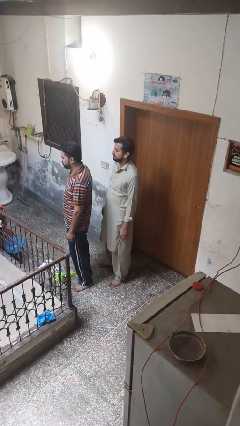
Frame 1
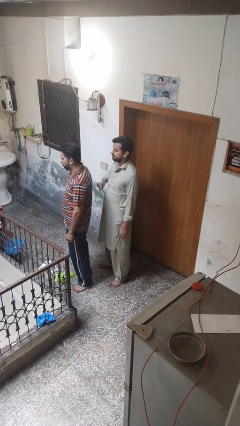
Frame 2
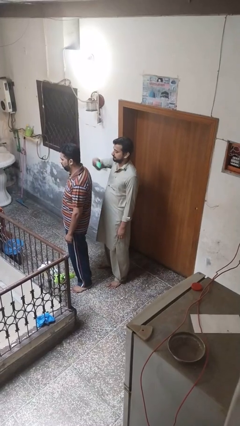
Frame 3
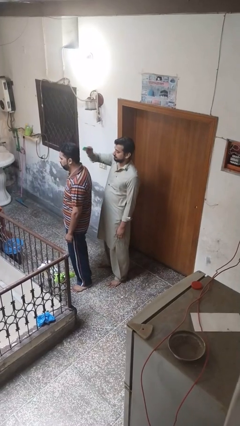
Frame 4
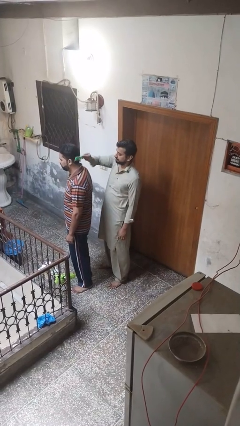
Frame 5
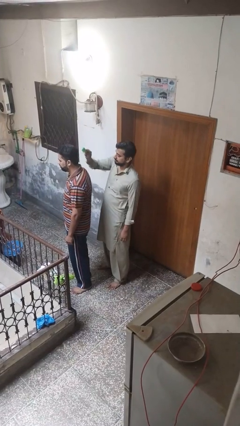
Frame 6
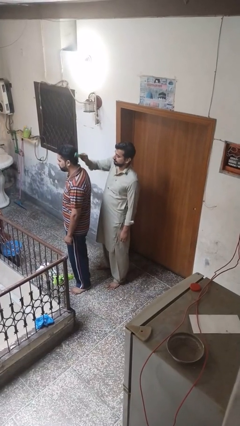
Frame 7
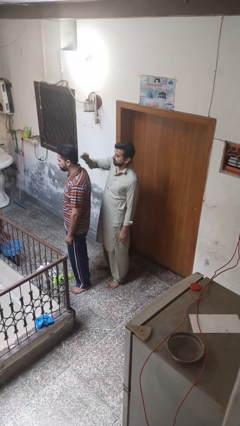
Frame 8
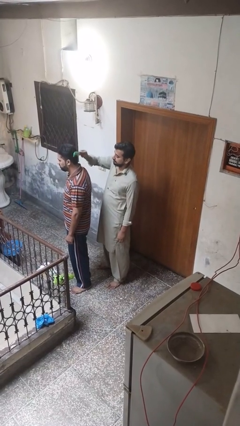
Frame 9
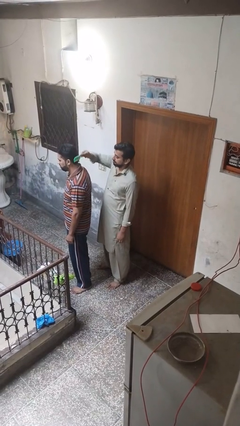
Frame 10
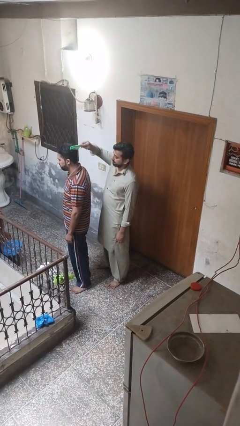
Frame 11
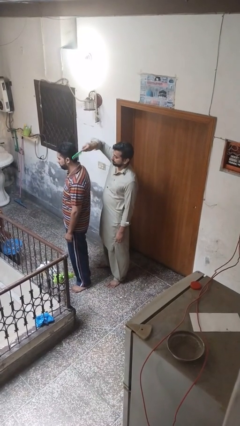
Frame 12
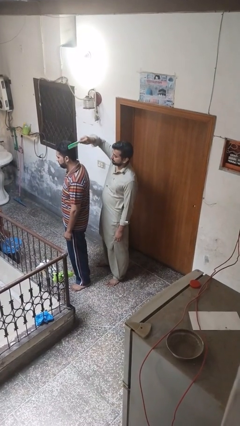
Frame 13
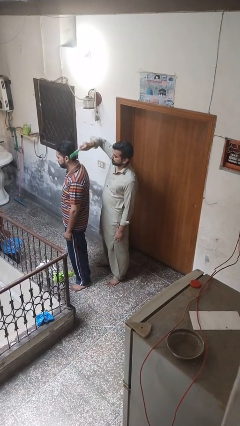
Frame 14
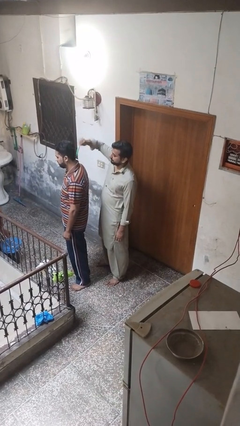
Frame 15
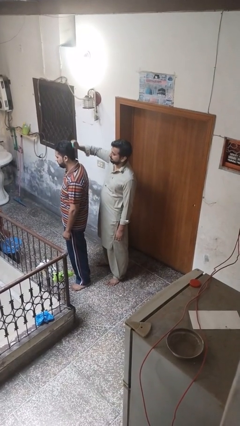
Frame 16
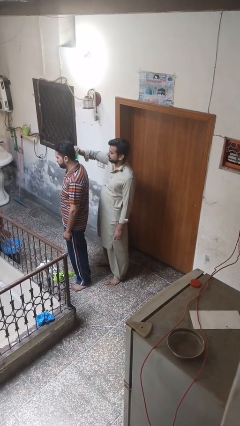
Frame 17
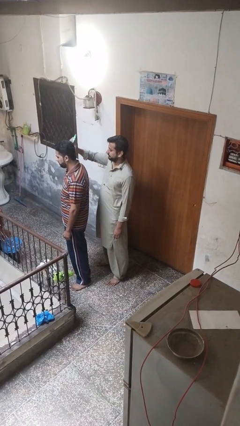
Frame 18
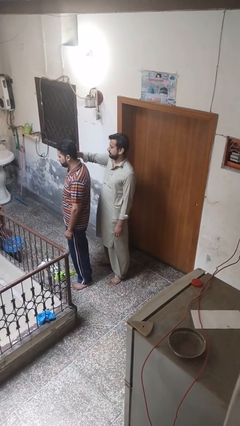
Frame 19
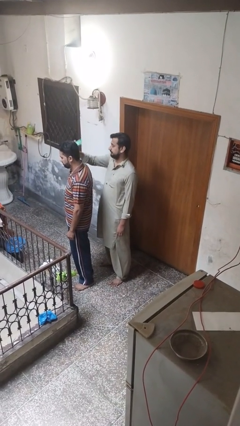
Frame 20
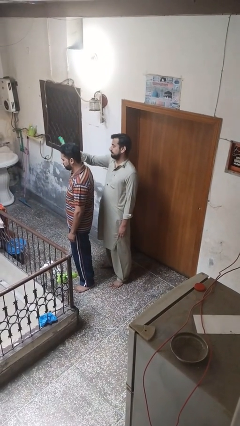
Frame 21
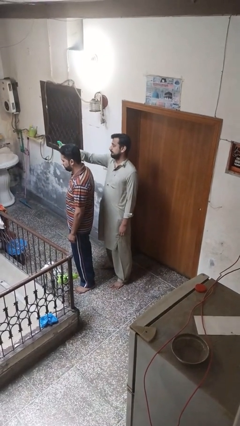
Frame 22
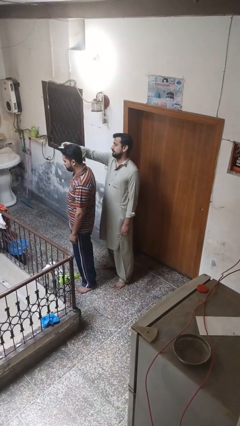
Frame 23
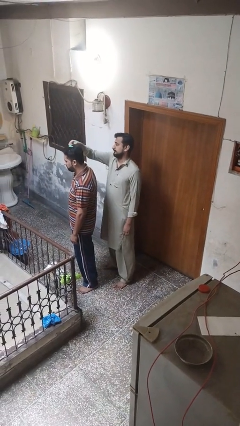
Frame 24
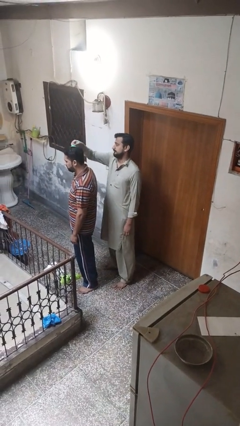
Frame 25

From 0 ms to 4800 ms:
person brushes hair of person

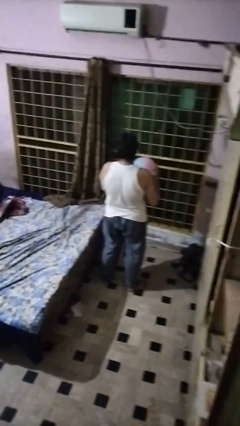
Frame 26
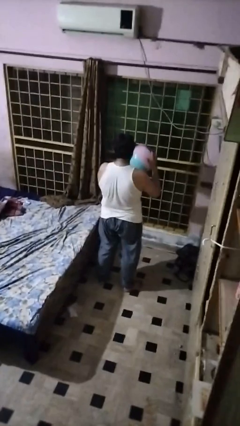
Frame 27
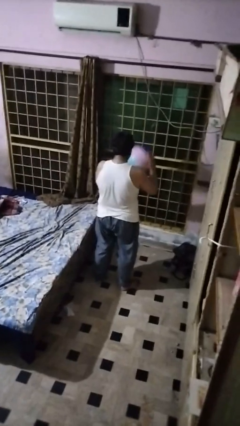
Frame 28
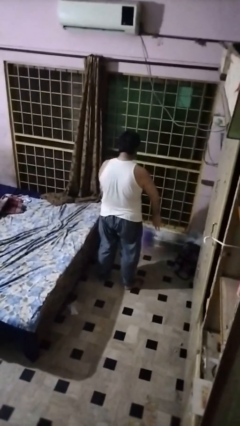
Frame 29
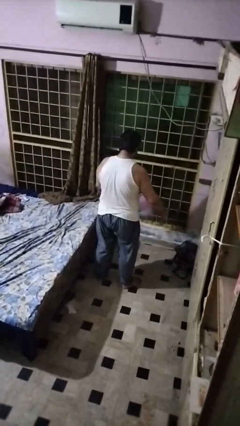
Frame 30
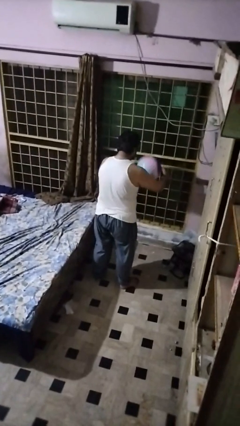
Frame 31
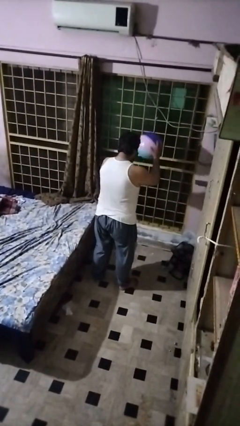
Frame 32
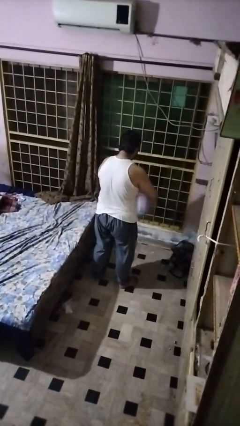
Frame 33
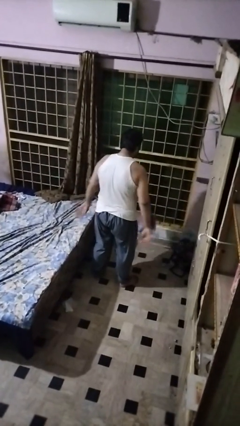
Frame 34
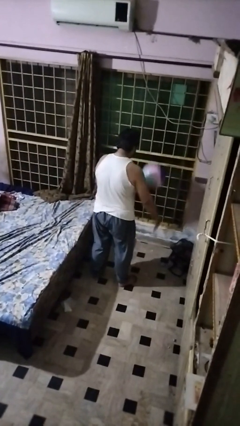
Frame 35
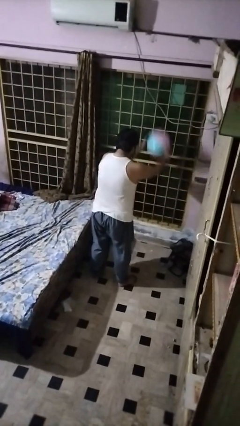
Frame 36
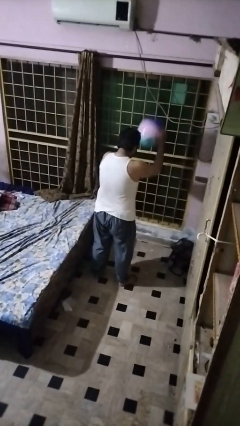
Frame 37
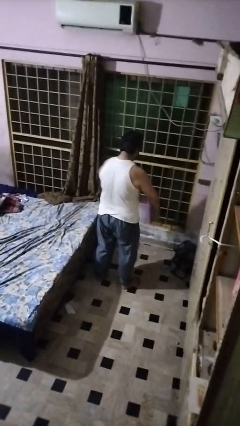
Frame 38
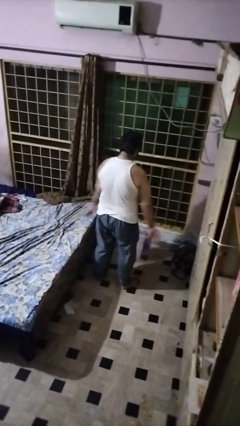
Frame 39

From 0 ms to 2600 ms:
person bounces ball on floor

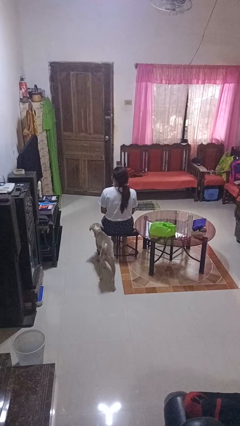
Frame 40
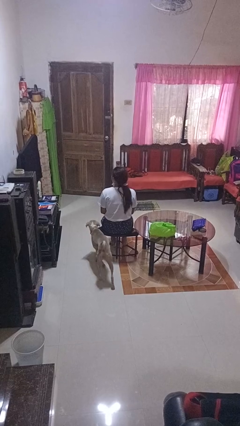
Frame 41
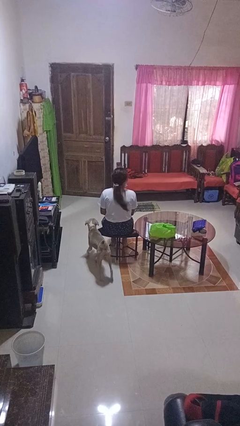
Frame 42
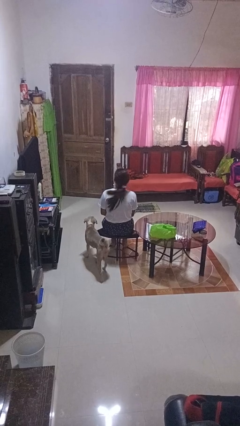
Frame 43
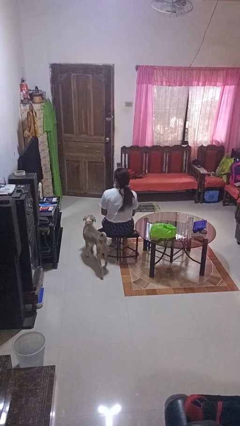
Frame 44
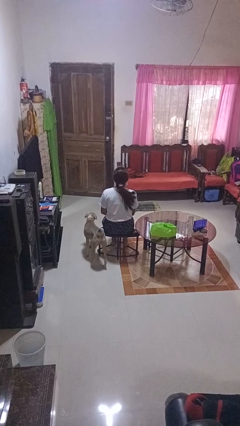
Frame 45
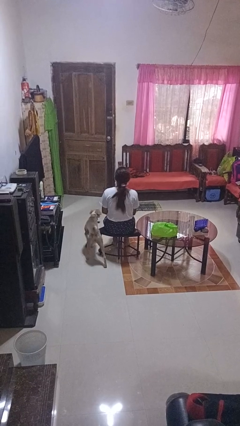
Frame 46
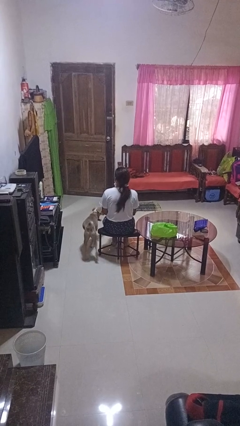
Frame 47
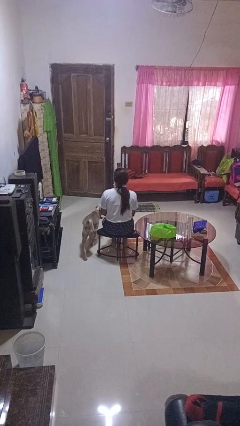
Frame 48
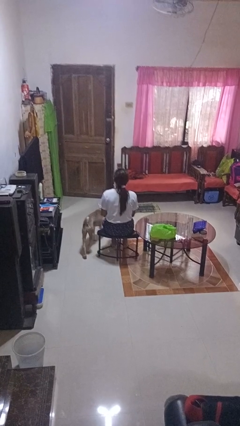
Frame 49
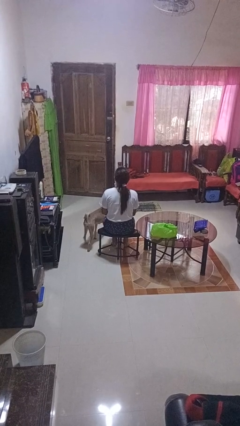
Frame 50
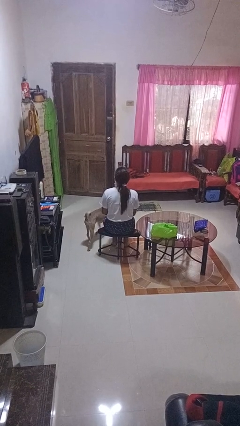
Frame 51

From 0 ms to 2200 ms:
person shakes head

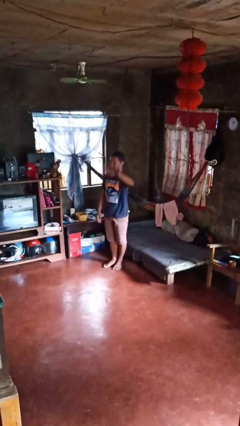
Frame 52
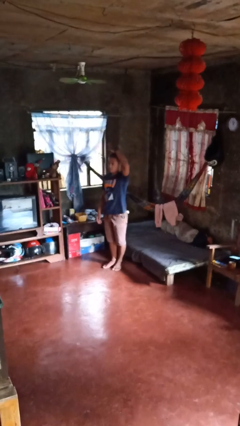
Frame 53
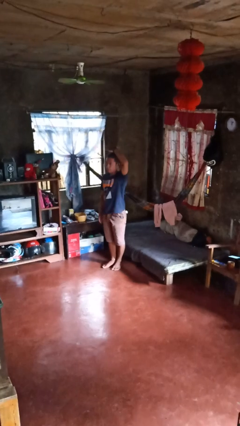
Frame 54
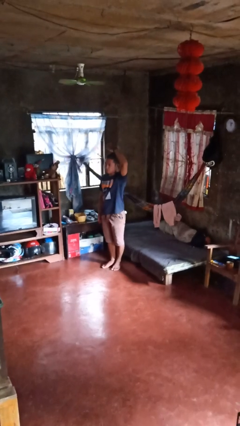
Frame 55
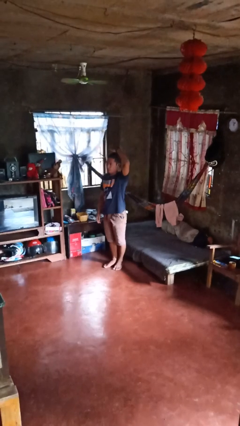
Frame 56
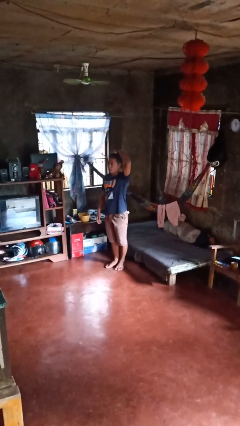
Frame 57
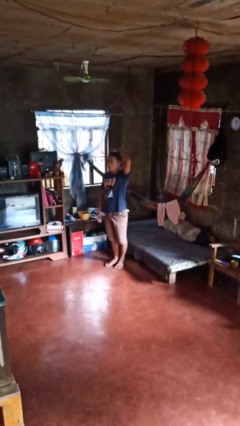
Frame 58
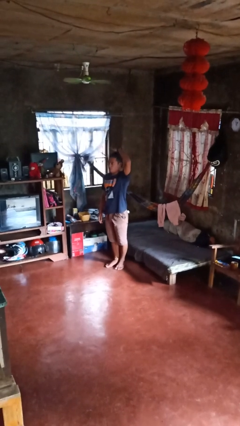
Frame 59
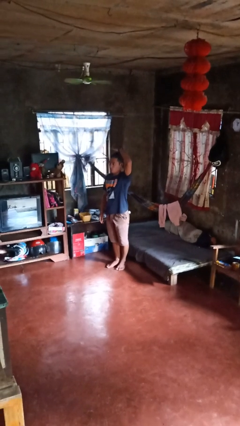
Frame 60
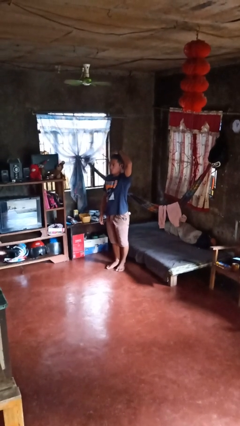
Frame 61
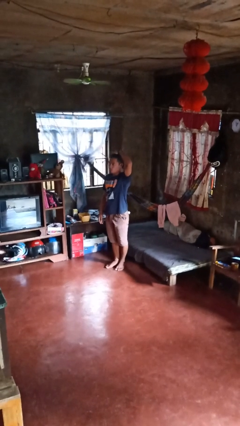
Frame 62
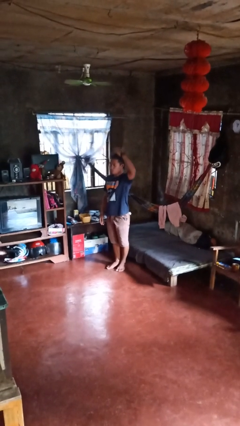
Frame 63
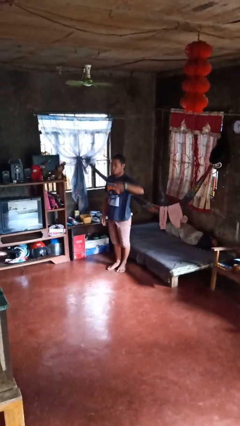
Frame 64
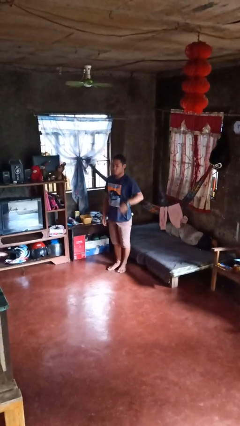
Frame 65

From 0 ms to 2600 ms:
person pats head

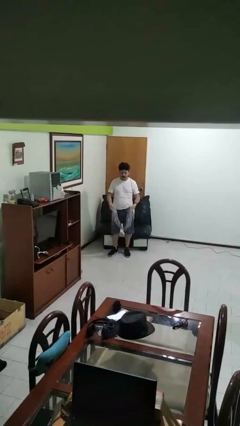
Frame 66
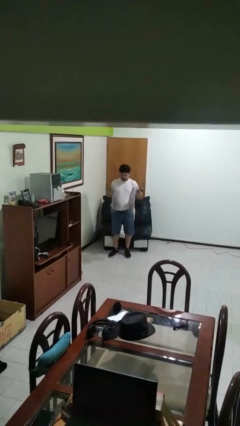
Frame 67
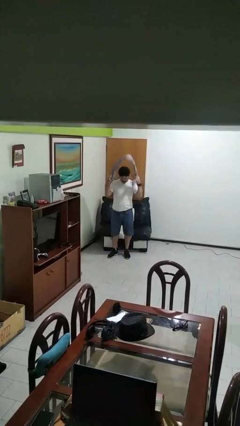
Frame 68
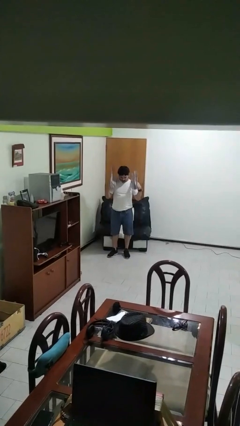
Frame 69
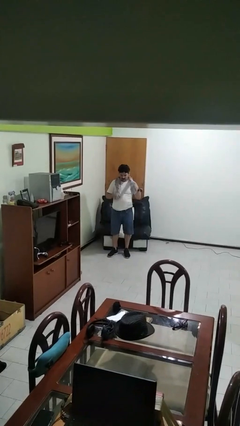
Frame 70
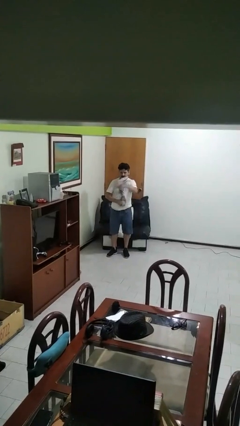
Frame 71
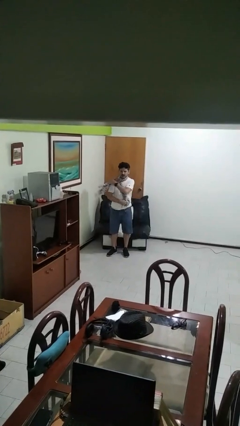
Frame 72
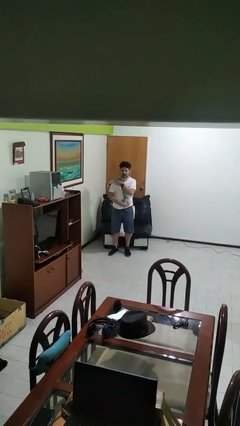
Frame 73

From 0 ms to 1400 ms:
person puts on scarf

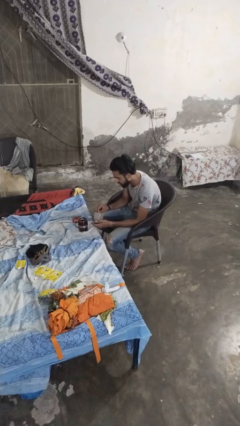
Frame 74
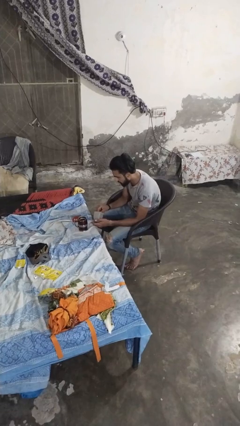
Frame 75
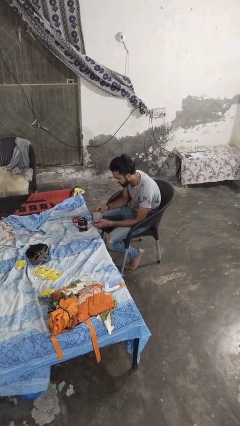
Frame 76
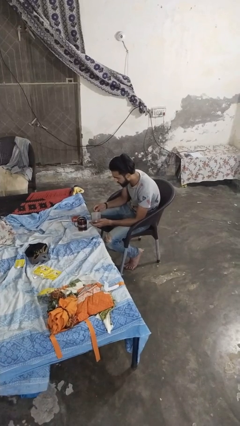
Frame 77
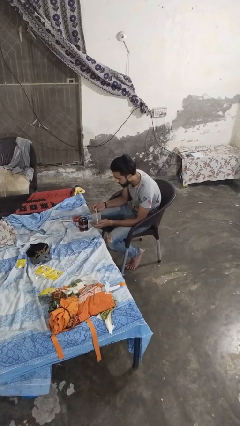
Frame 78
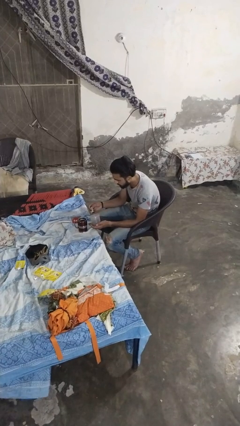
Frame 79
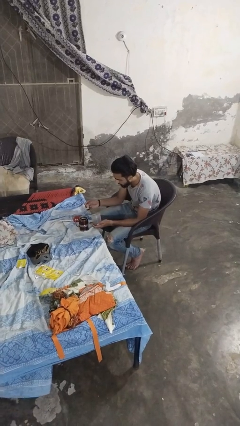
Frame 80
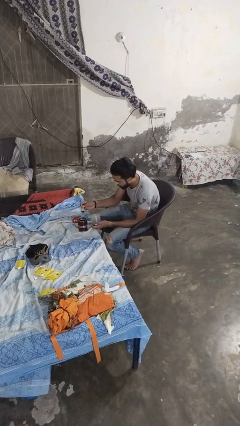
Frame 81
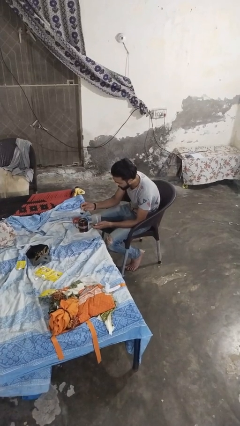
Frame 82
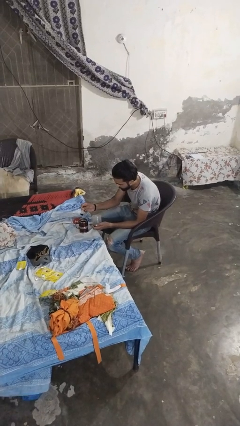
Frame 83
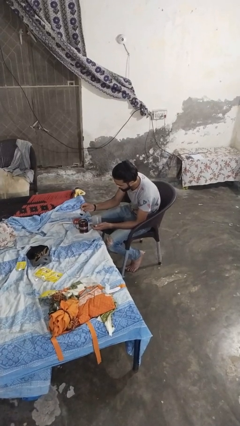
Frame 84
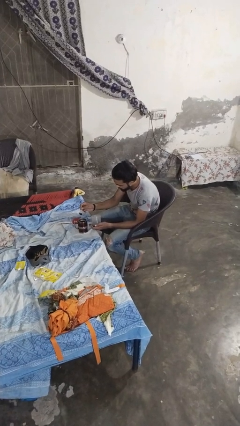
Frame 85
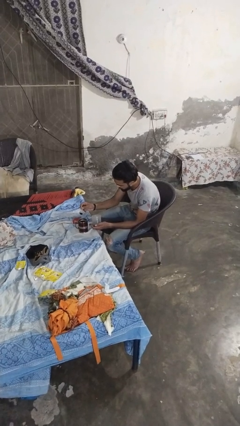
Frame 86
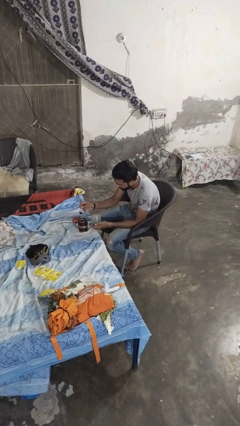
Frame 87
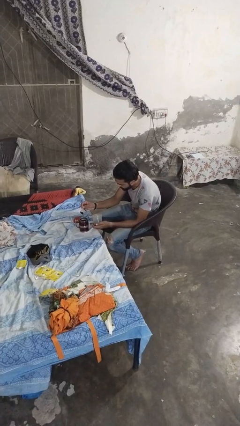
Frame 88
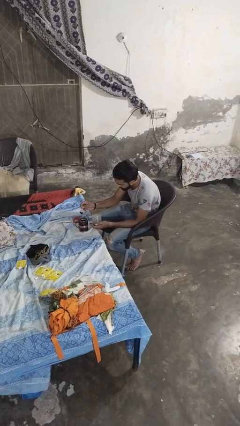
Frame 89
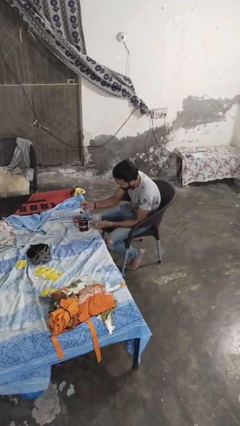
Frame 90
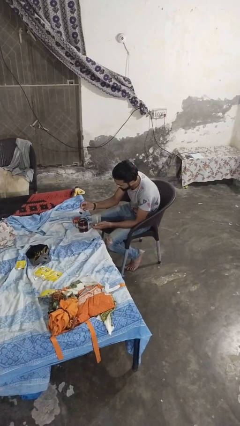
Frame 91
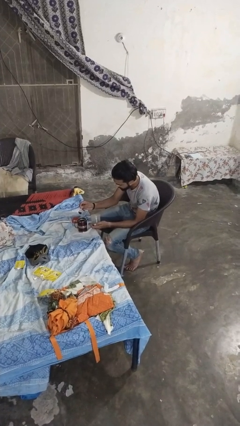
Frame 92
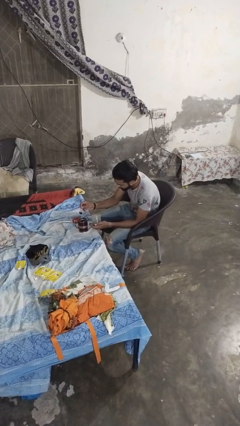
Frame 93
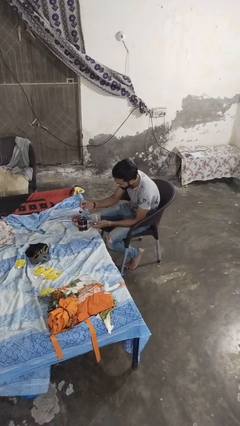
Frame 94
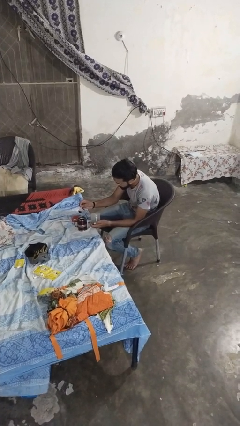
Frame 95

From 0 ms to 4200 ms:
person pours coffee into mug
